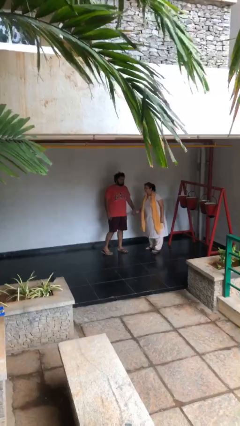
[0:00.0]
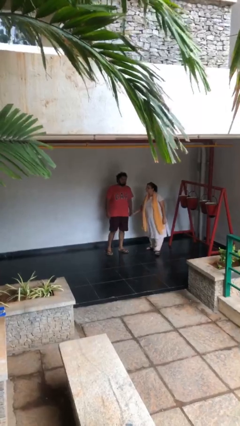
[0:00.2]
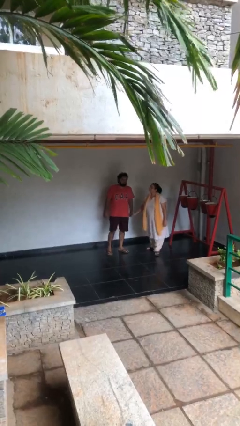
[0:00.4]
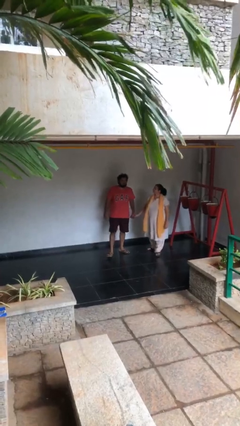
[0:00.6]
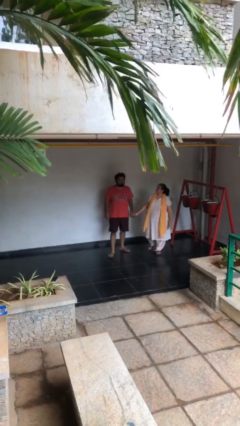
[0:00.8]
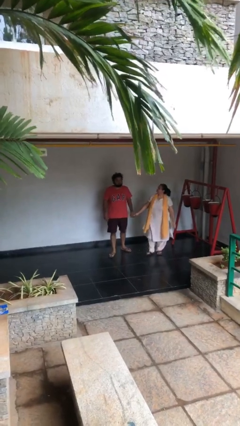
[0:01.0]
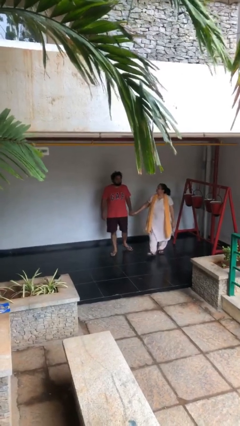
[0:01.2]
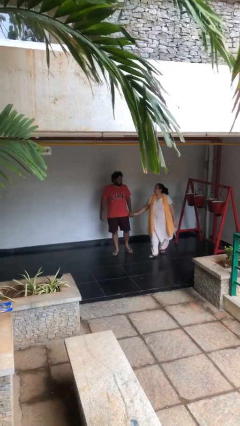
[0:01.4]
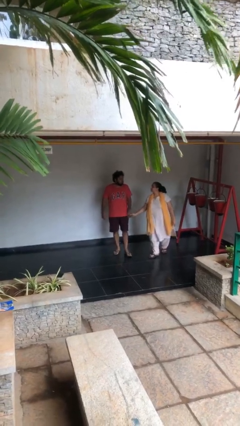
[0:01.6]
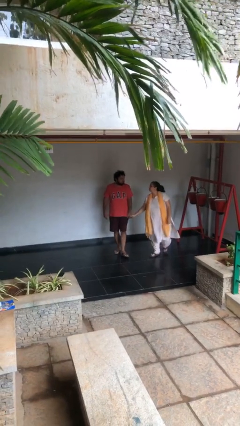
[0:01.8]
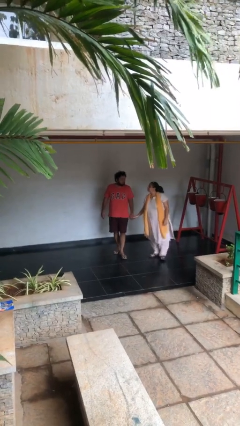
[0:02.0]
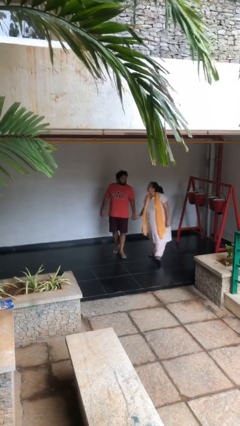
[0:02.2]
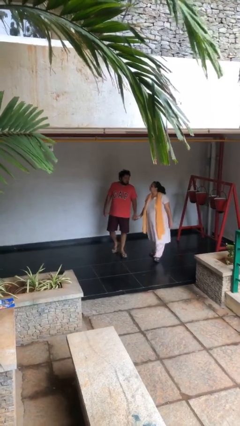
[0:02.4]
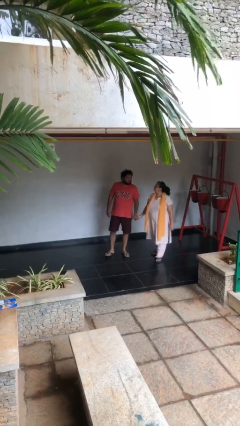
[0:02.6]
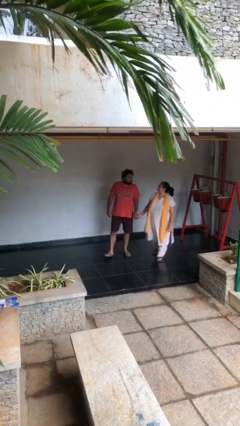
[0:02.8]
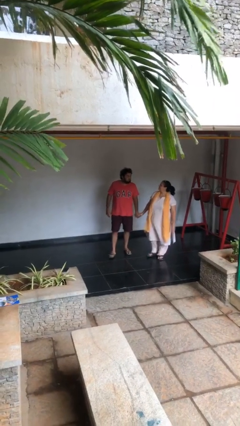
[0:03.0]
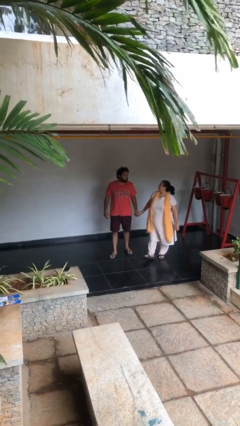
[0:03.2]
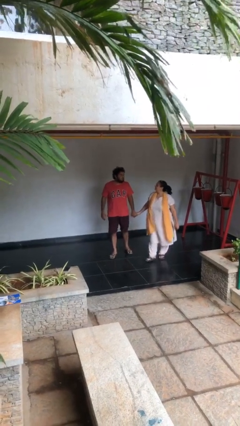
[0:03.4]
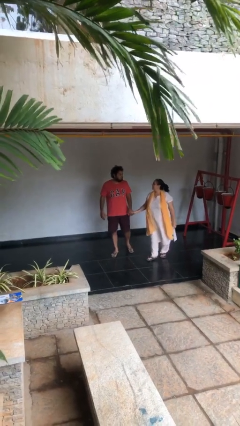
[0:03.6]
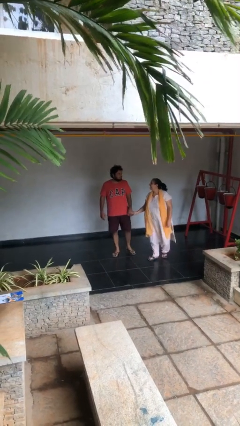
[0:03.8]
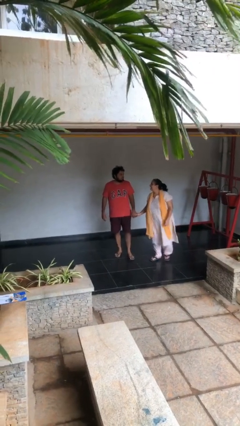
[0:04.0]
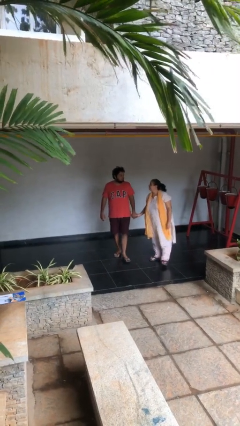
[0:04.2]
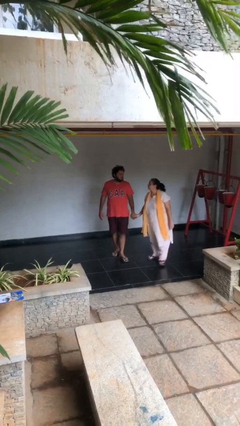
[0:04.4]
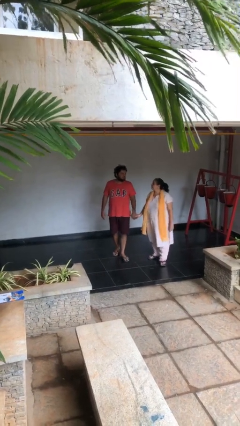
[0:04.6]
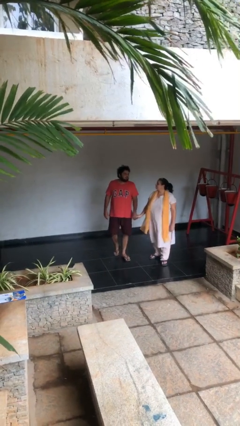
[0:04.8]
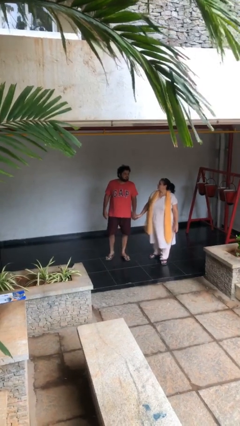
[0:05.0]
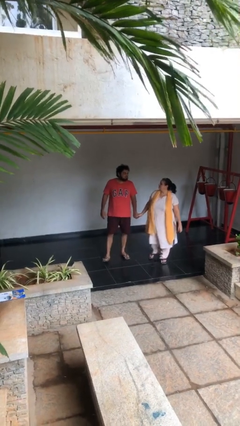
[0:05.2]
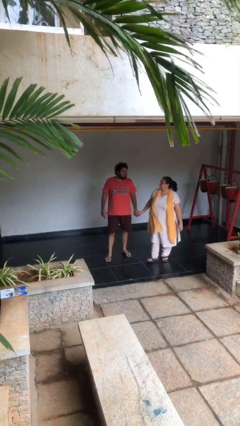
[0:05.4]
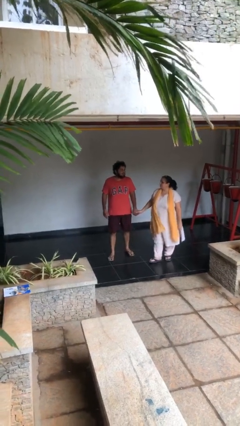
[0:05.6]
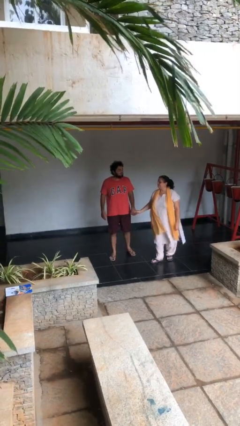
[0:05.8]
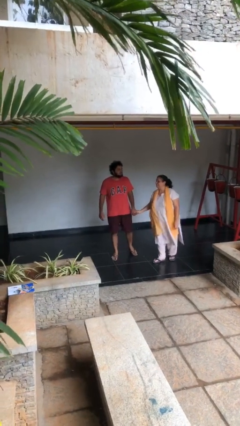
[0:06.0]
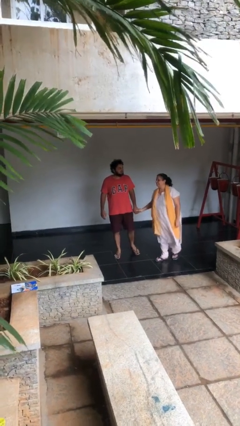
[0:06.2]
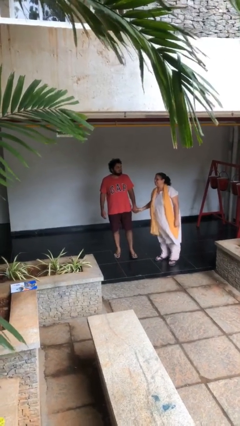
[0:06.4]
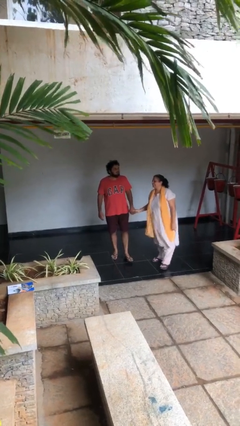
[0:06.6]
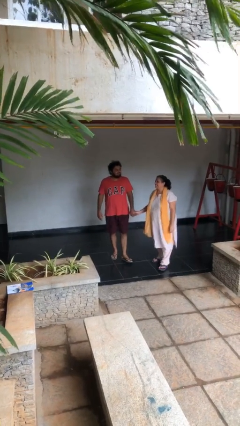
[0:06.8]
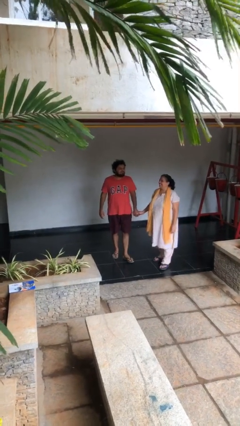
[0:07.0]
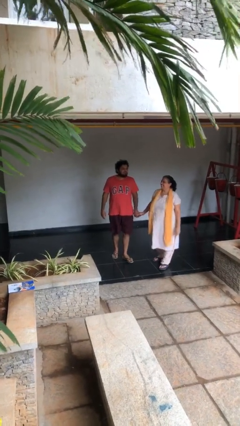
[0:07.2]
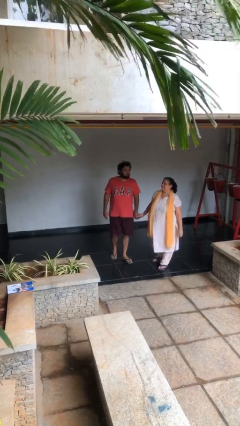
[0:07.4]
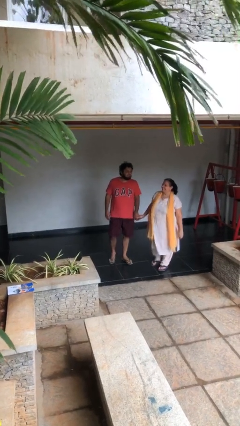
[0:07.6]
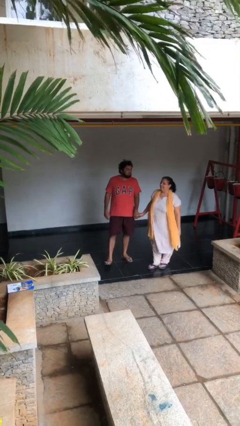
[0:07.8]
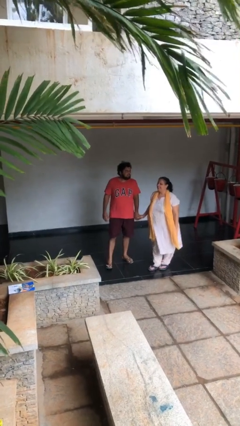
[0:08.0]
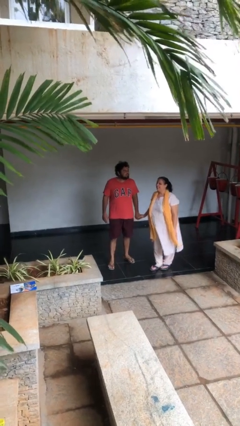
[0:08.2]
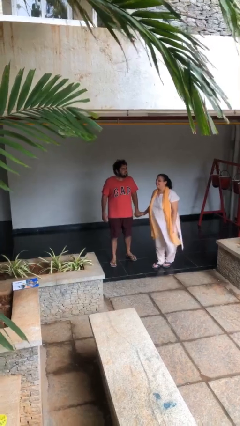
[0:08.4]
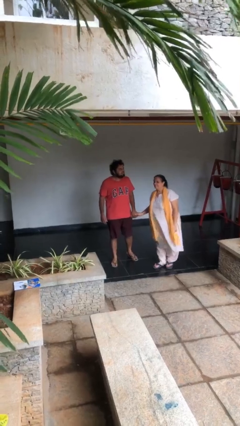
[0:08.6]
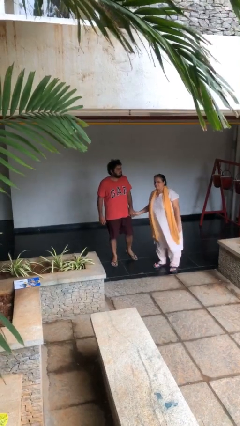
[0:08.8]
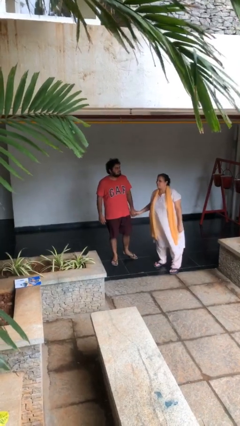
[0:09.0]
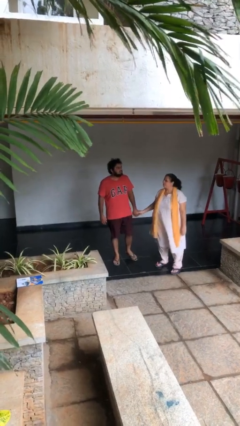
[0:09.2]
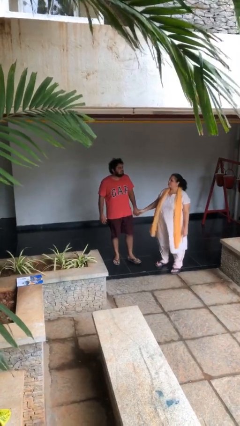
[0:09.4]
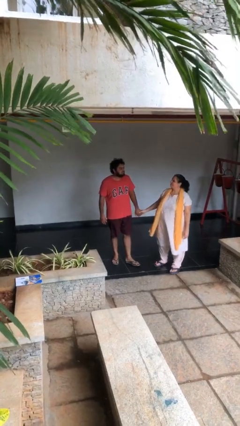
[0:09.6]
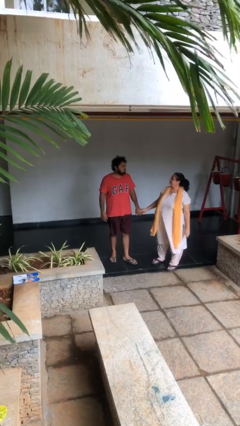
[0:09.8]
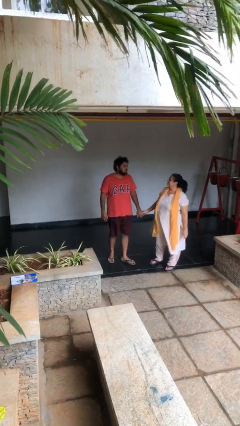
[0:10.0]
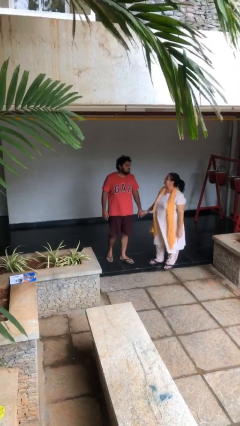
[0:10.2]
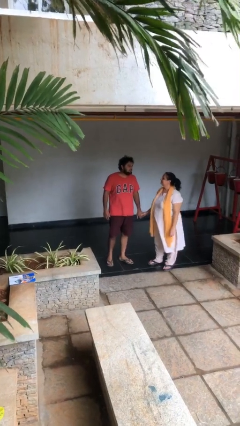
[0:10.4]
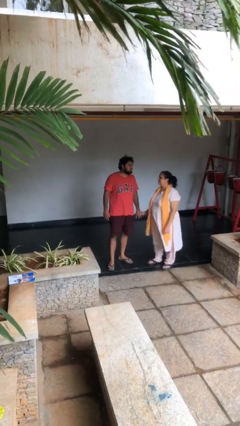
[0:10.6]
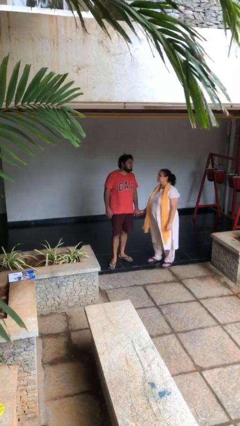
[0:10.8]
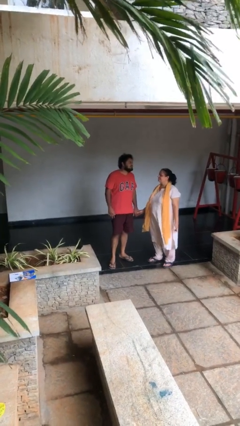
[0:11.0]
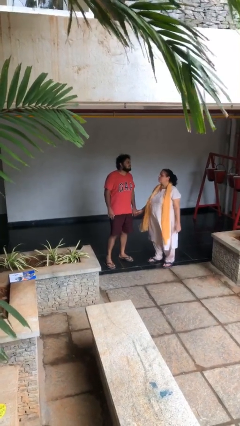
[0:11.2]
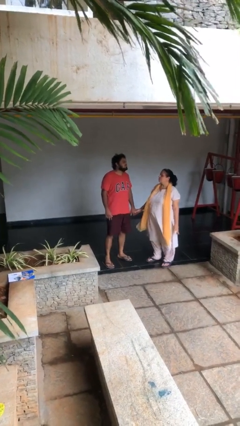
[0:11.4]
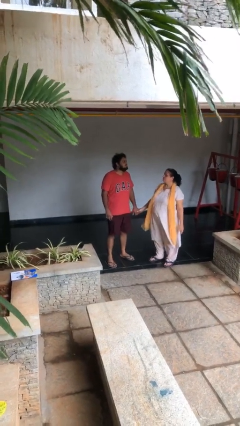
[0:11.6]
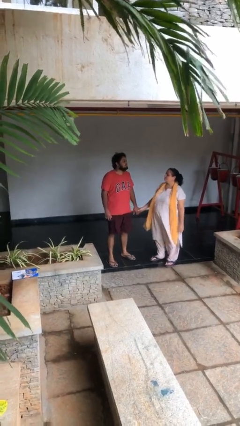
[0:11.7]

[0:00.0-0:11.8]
person holds hand

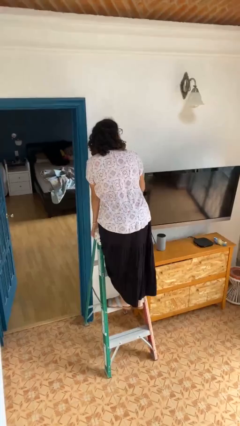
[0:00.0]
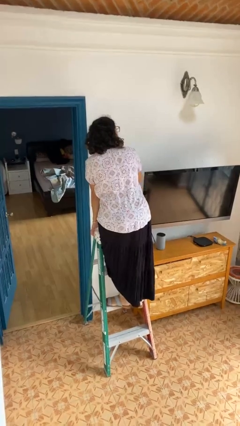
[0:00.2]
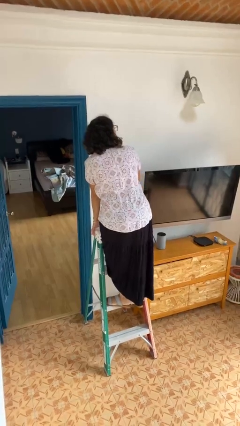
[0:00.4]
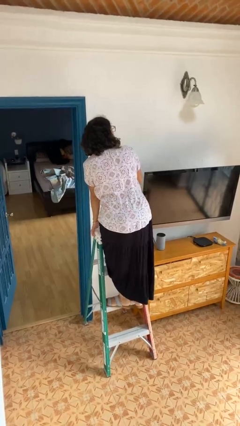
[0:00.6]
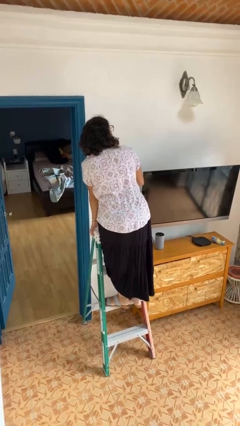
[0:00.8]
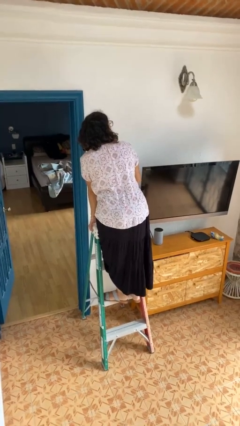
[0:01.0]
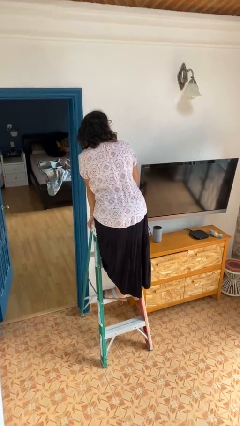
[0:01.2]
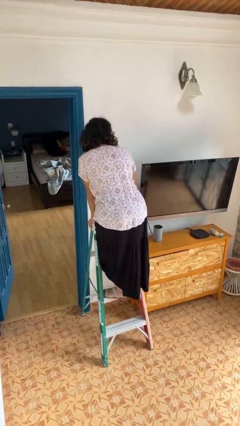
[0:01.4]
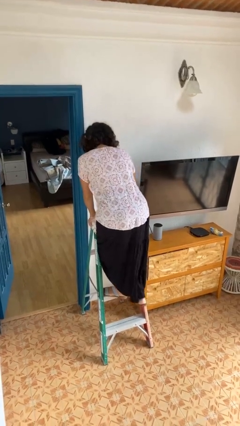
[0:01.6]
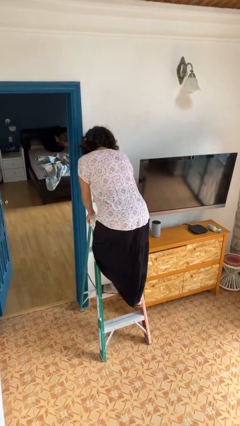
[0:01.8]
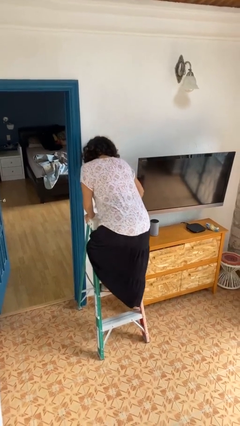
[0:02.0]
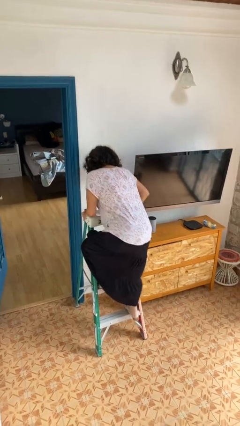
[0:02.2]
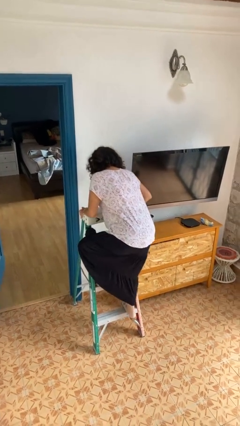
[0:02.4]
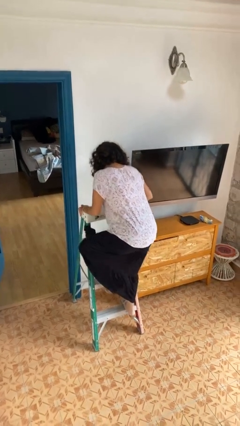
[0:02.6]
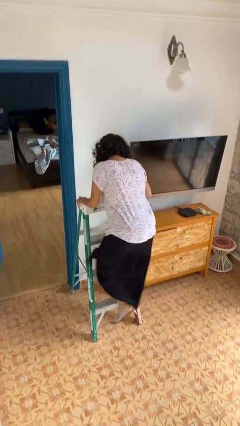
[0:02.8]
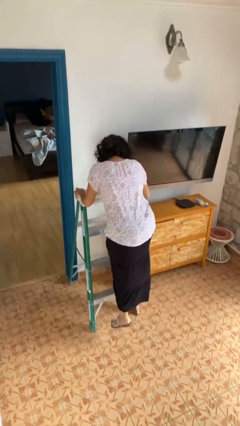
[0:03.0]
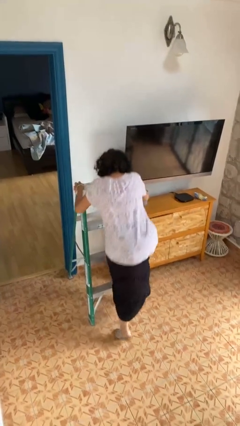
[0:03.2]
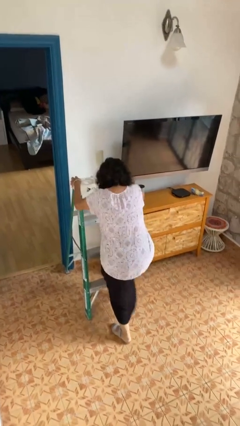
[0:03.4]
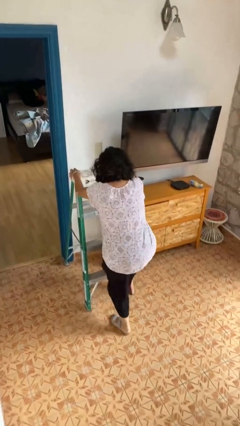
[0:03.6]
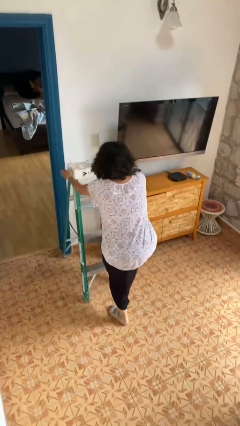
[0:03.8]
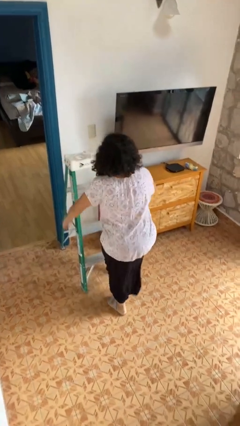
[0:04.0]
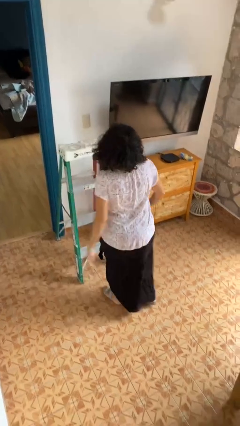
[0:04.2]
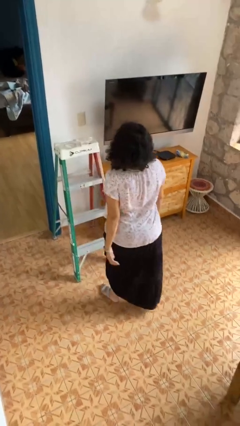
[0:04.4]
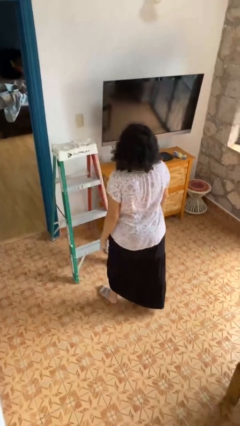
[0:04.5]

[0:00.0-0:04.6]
person climbs down ladder

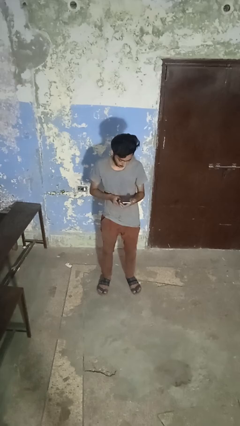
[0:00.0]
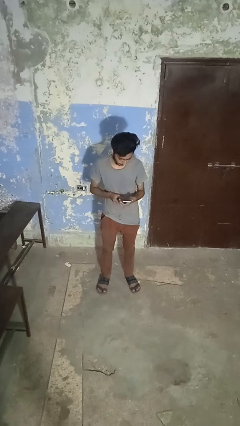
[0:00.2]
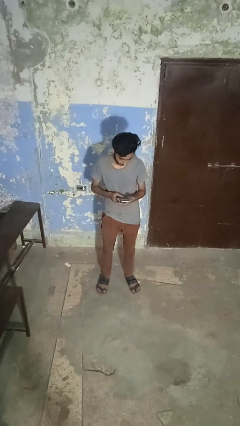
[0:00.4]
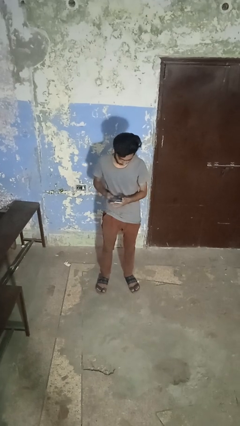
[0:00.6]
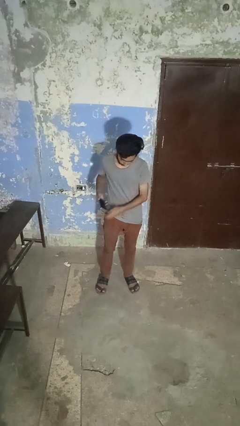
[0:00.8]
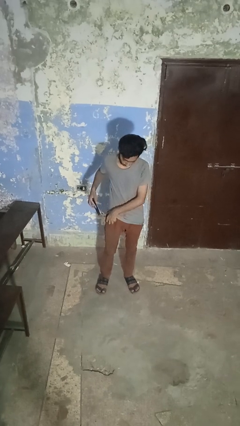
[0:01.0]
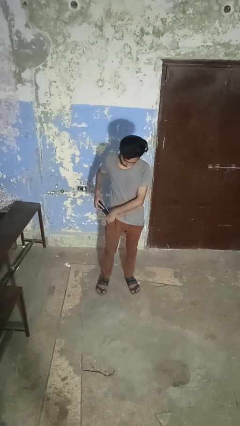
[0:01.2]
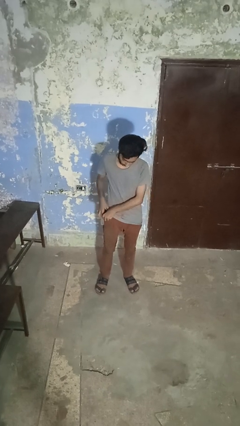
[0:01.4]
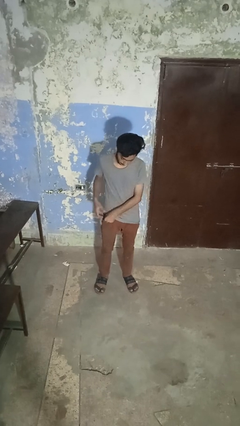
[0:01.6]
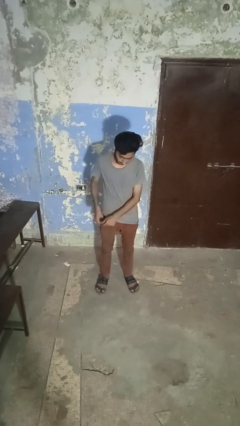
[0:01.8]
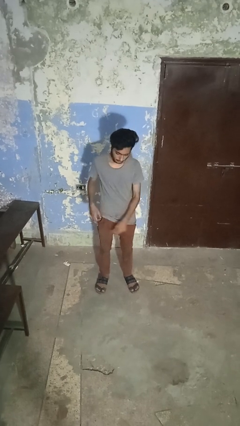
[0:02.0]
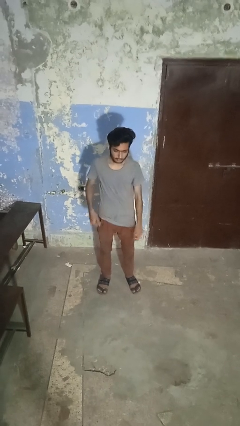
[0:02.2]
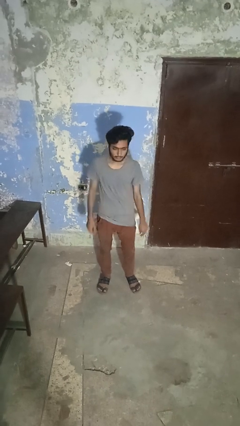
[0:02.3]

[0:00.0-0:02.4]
person puts phone into pocket
